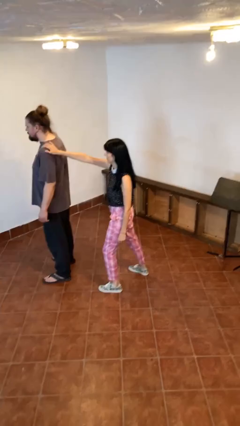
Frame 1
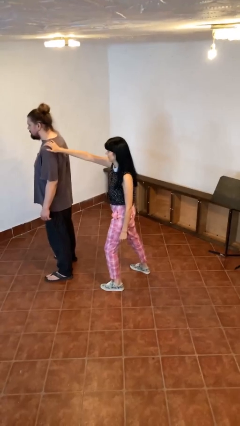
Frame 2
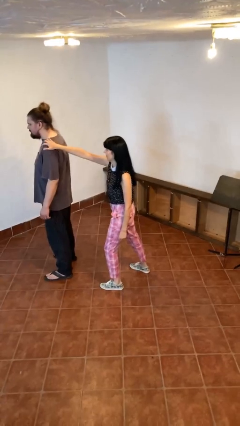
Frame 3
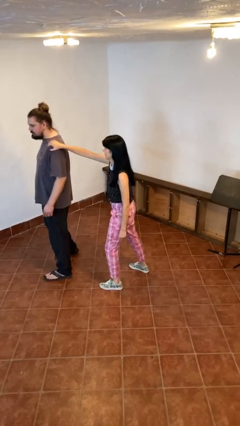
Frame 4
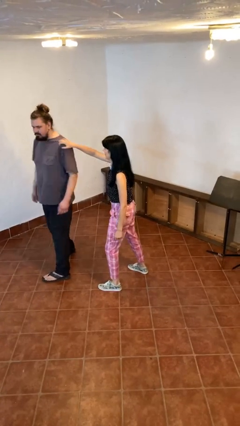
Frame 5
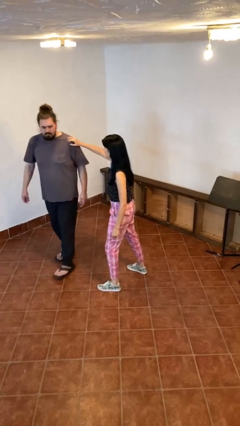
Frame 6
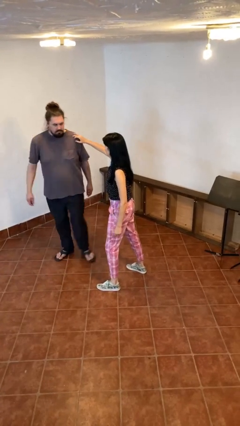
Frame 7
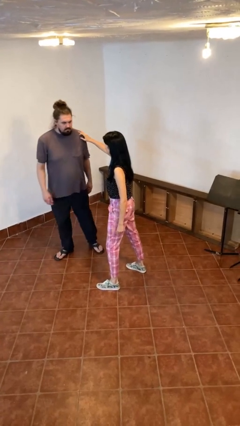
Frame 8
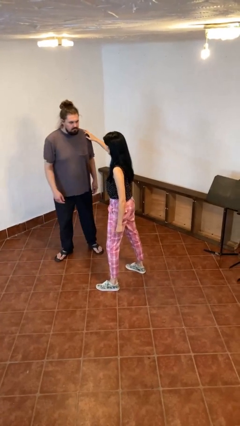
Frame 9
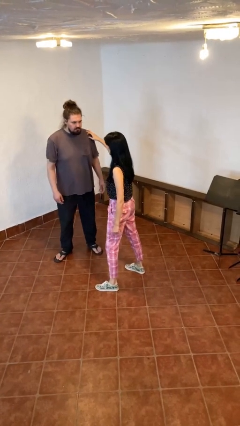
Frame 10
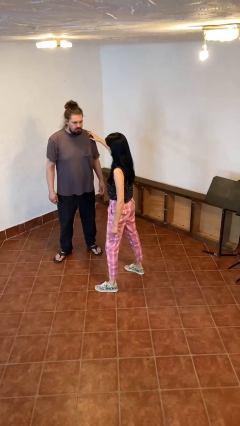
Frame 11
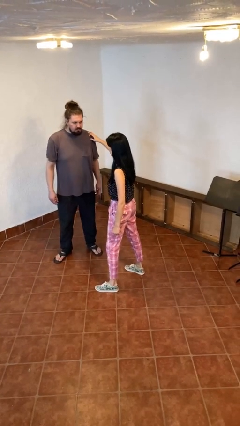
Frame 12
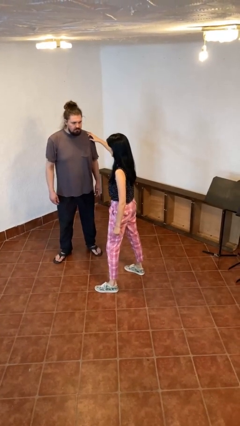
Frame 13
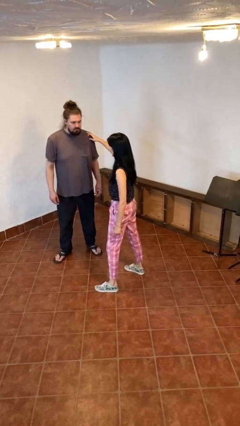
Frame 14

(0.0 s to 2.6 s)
person spins person around

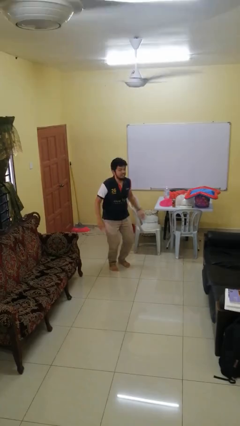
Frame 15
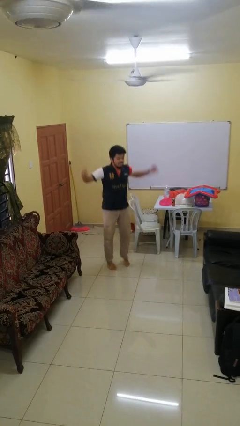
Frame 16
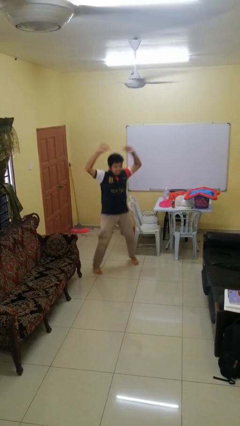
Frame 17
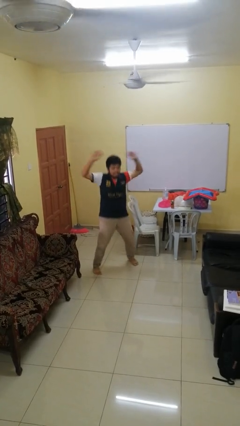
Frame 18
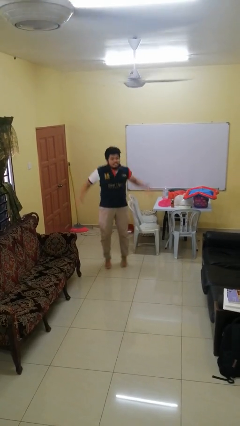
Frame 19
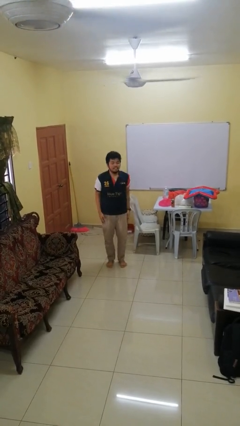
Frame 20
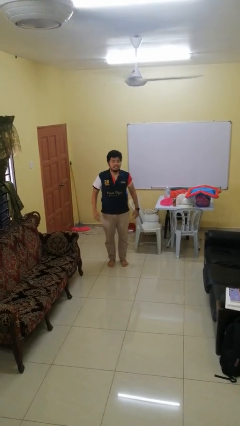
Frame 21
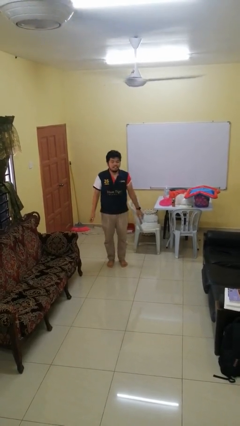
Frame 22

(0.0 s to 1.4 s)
person exercises with jumping jacks

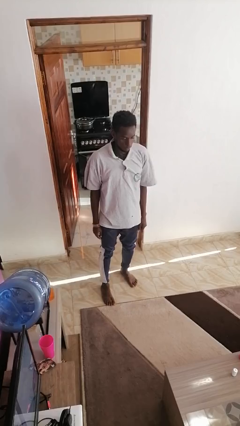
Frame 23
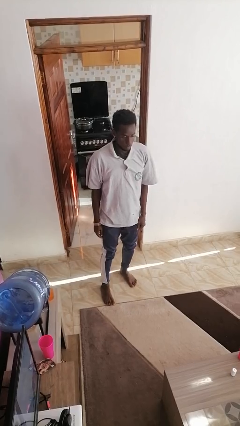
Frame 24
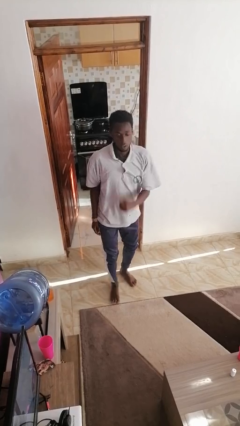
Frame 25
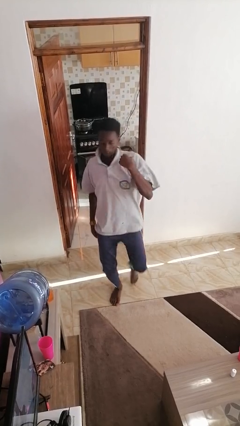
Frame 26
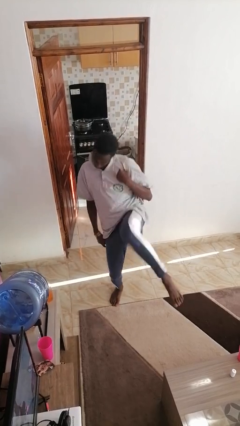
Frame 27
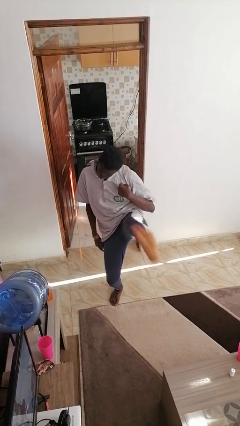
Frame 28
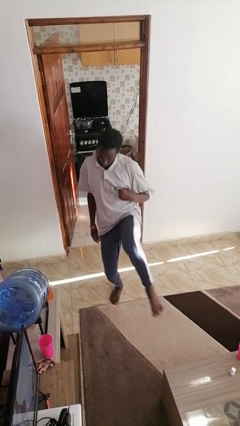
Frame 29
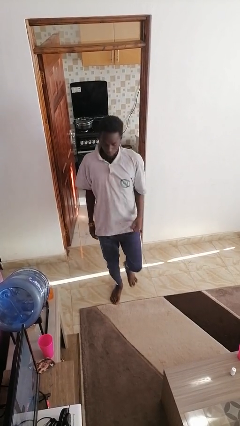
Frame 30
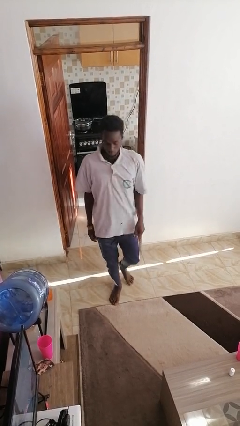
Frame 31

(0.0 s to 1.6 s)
person karate kicks

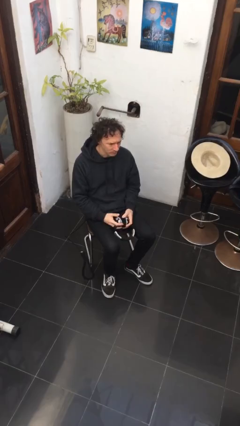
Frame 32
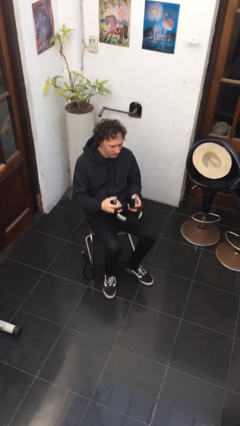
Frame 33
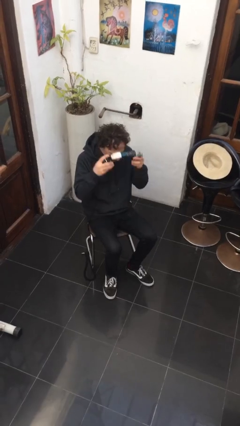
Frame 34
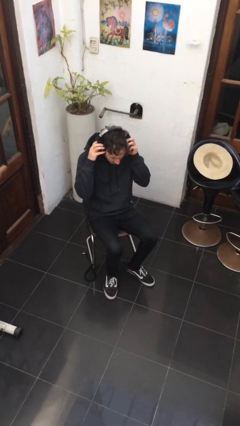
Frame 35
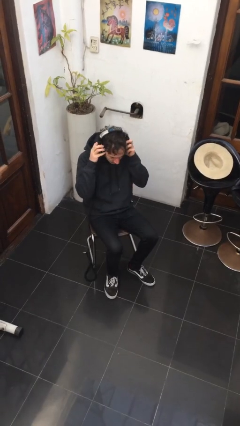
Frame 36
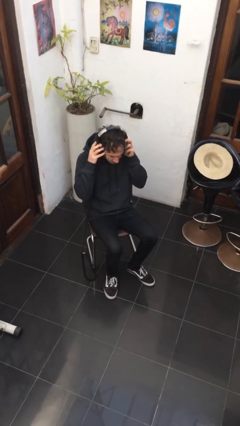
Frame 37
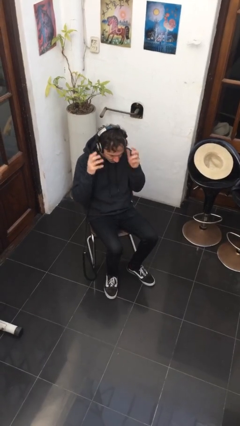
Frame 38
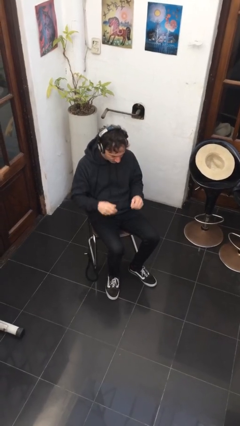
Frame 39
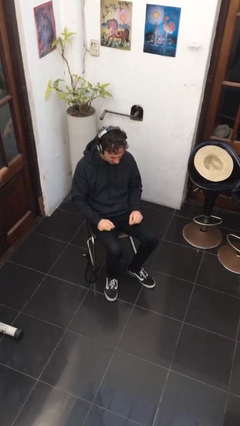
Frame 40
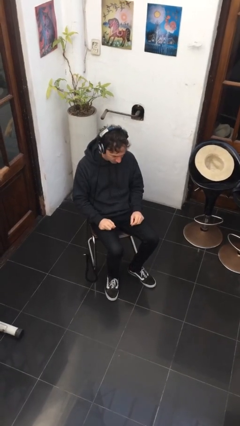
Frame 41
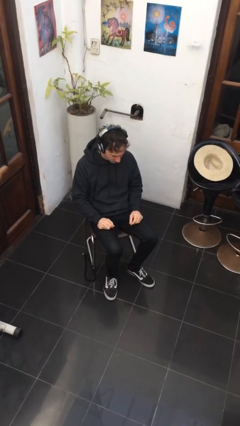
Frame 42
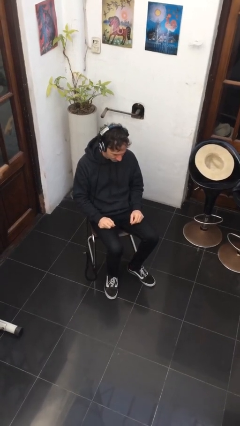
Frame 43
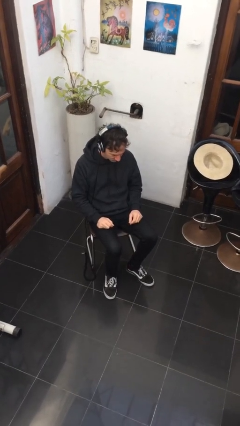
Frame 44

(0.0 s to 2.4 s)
person puts on headphones

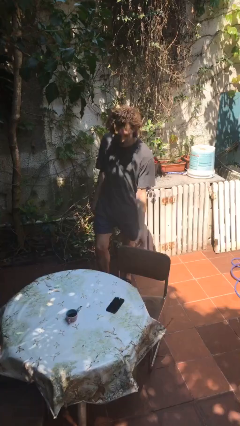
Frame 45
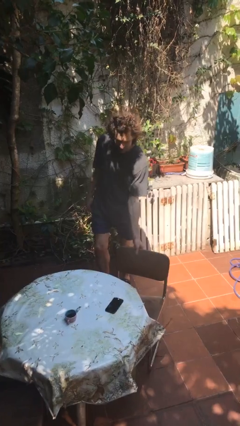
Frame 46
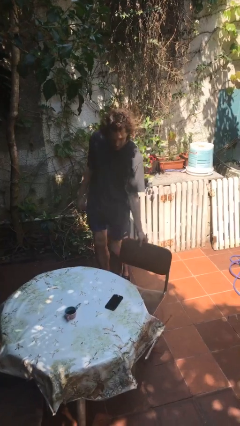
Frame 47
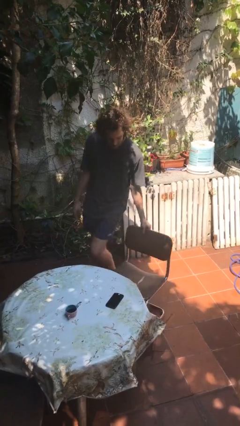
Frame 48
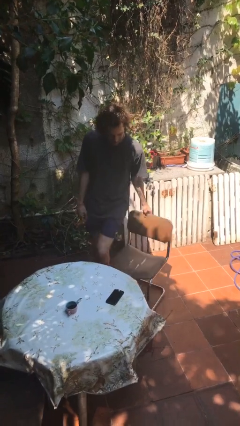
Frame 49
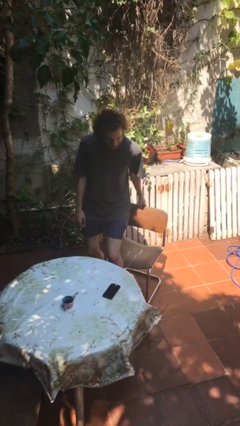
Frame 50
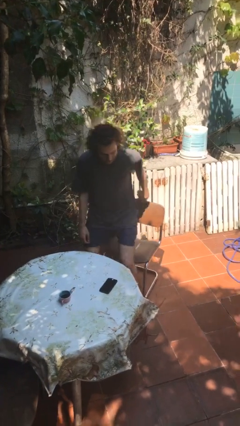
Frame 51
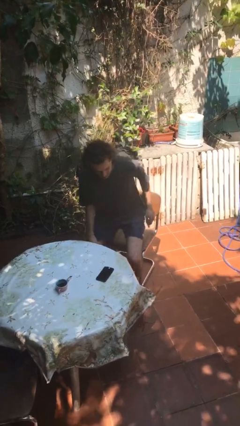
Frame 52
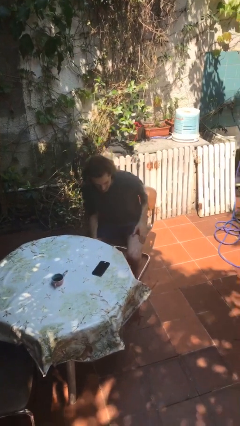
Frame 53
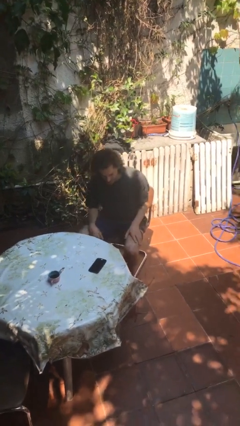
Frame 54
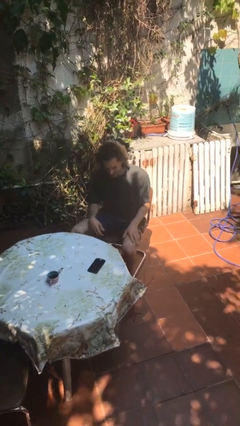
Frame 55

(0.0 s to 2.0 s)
person sits down

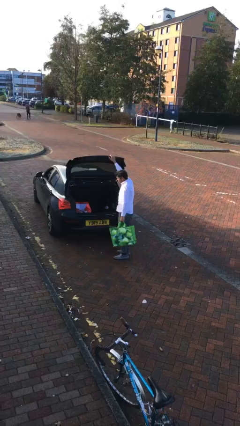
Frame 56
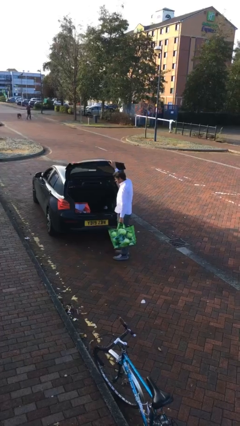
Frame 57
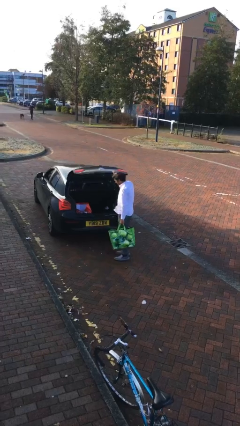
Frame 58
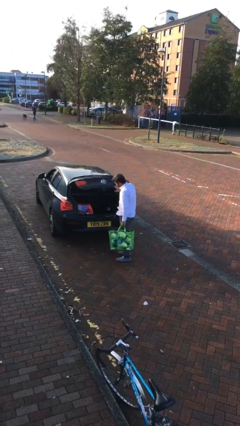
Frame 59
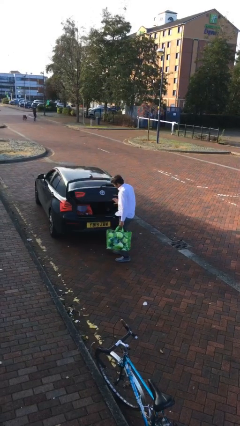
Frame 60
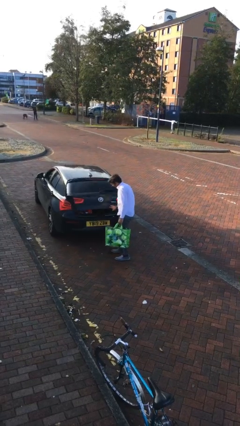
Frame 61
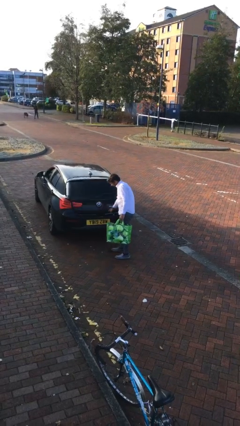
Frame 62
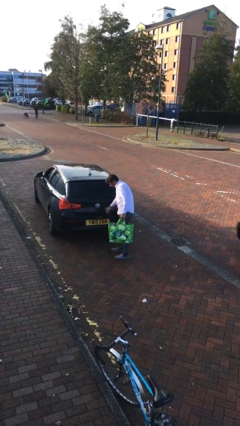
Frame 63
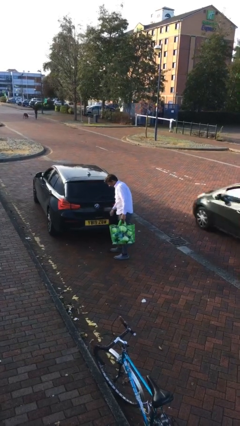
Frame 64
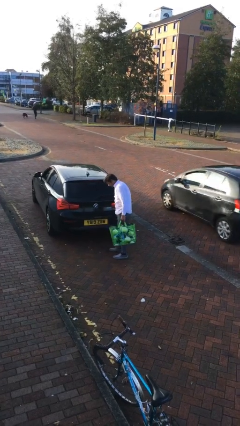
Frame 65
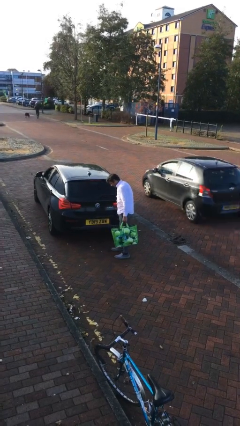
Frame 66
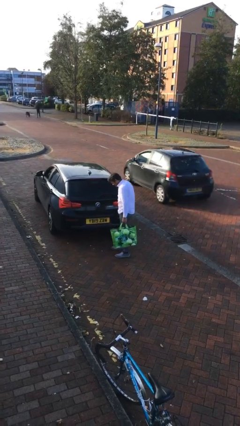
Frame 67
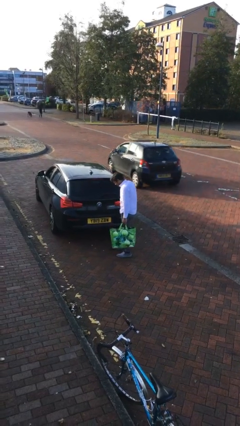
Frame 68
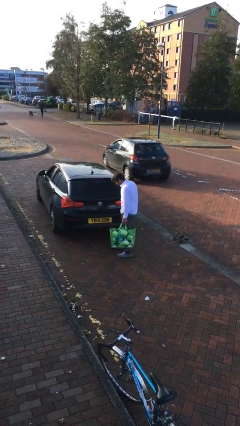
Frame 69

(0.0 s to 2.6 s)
person closes car trunk

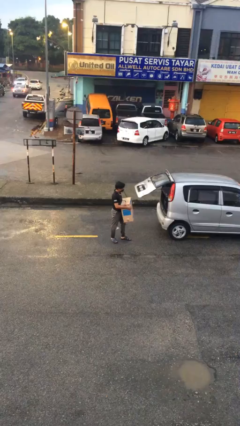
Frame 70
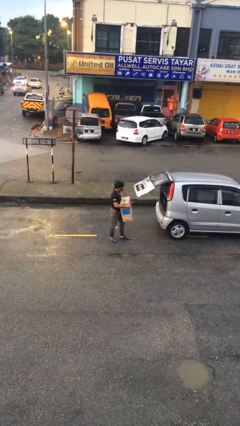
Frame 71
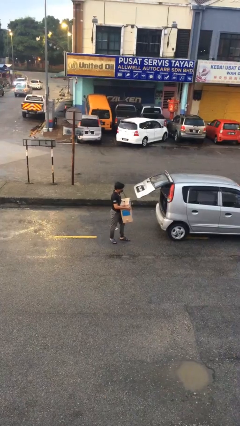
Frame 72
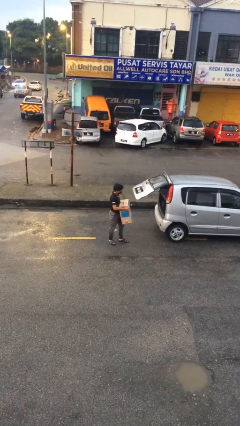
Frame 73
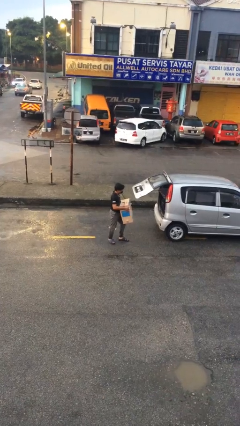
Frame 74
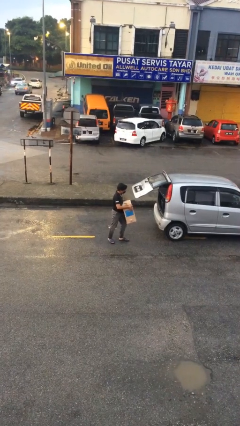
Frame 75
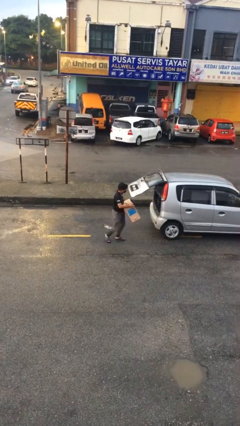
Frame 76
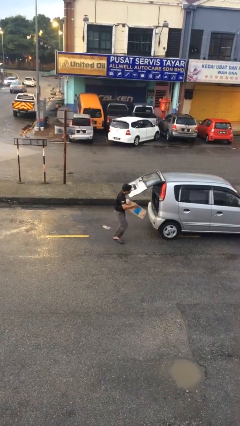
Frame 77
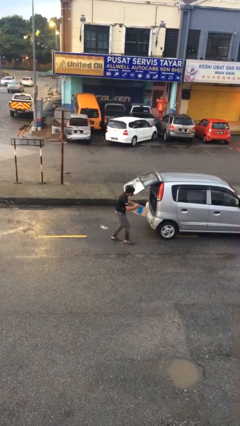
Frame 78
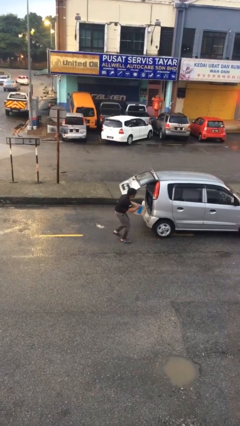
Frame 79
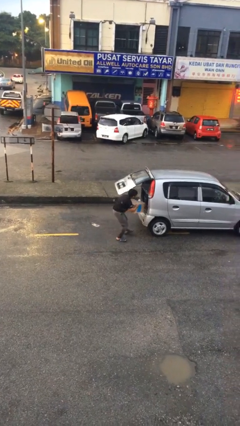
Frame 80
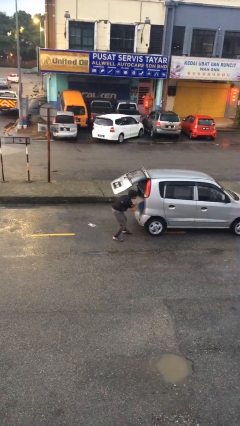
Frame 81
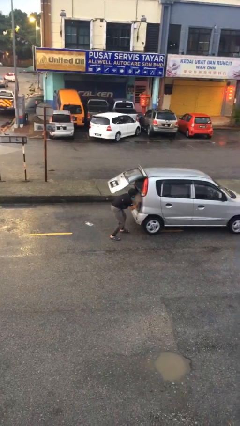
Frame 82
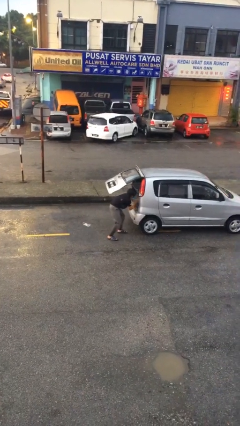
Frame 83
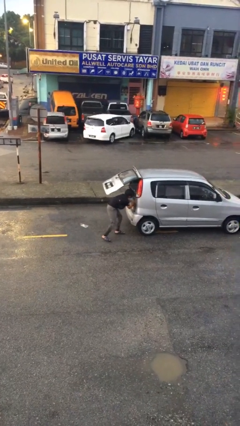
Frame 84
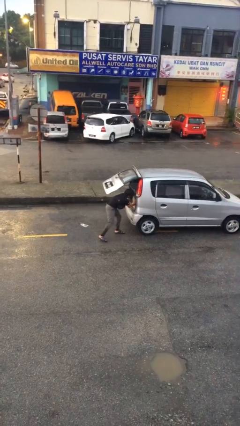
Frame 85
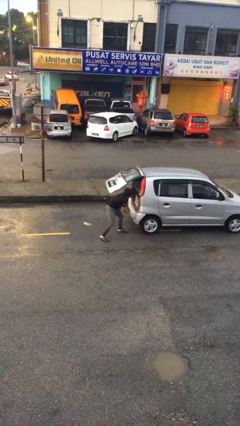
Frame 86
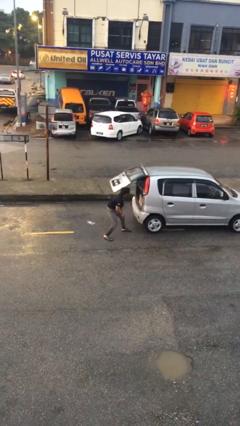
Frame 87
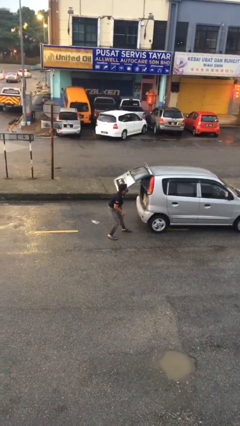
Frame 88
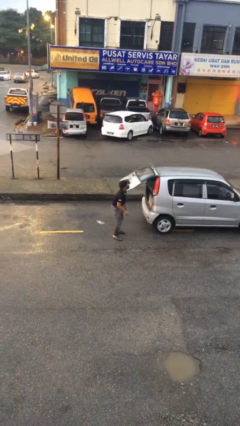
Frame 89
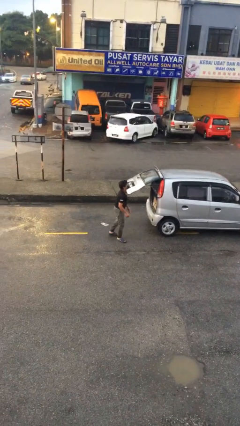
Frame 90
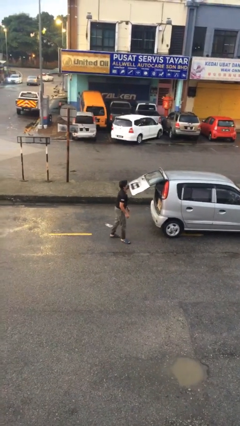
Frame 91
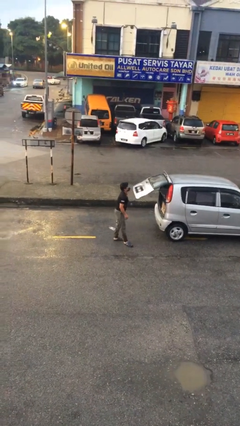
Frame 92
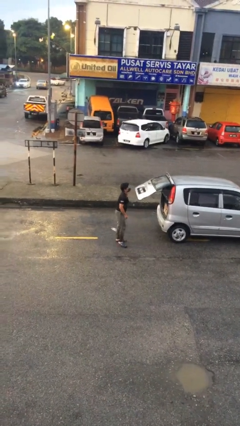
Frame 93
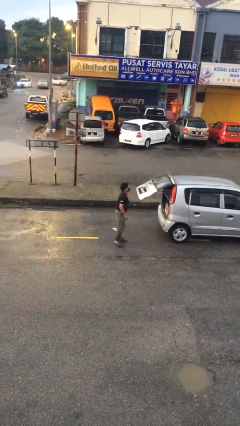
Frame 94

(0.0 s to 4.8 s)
person loads car
